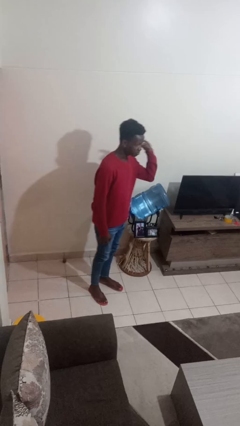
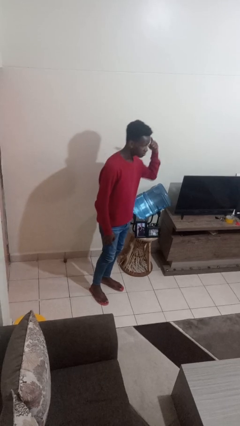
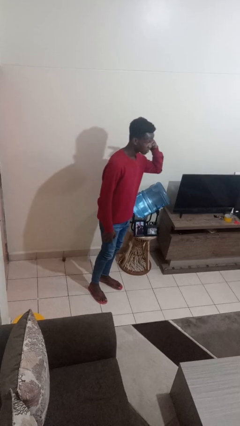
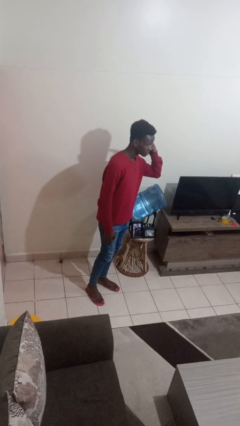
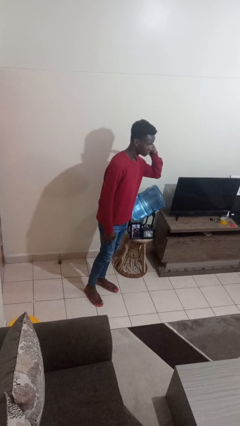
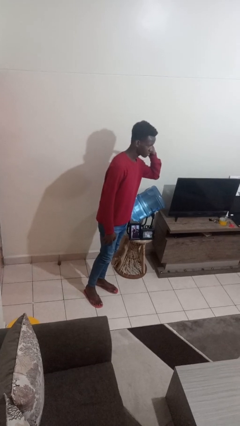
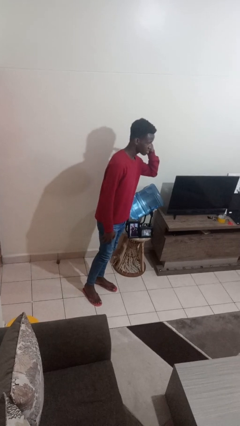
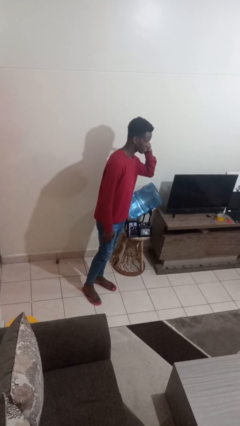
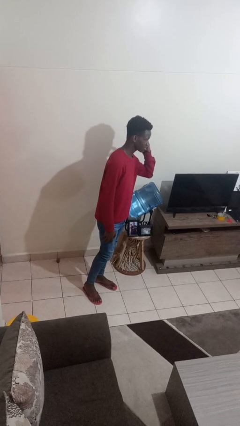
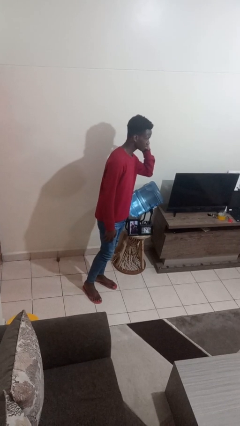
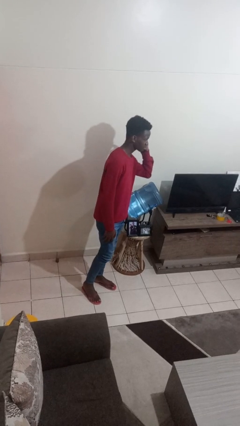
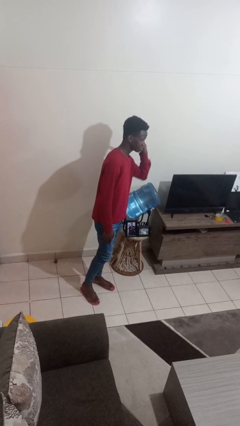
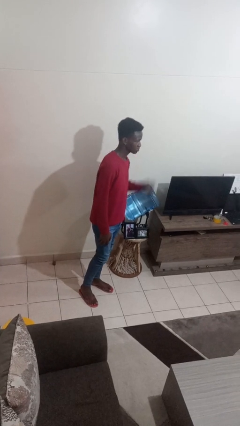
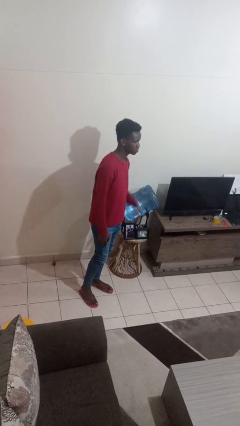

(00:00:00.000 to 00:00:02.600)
person gestures listen closely

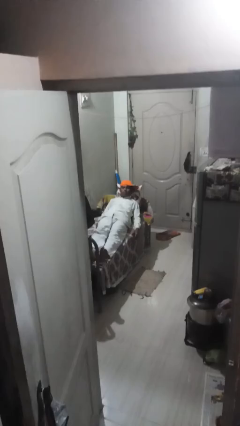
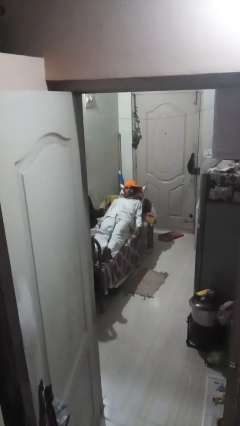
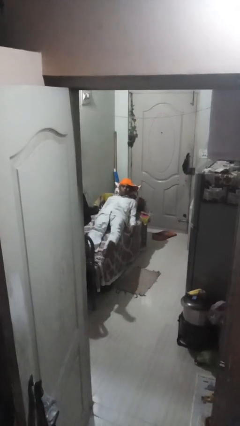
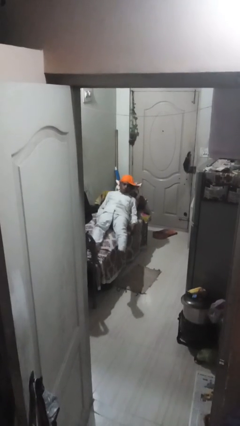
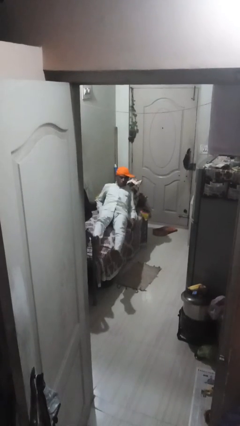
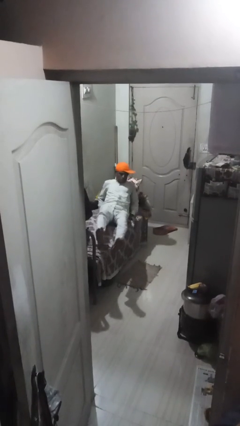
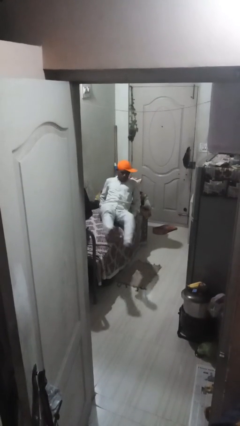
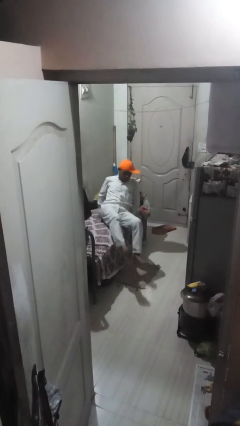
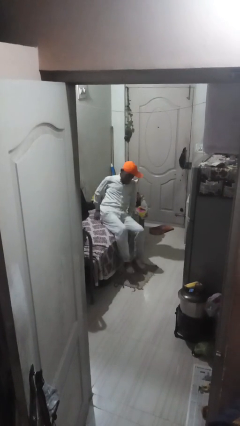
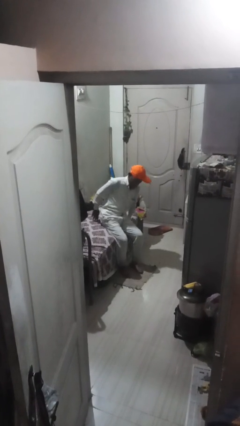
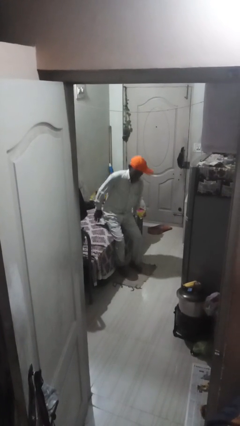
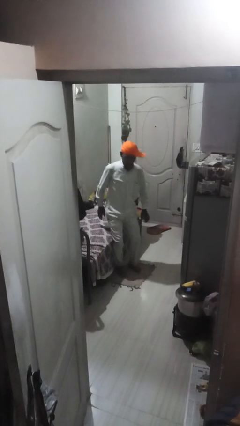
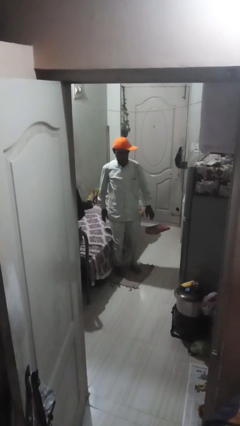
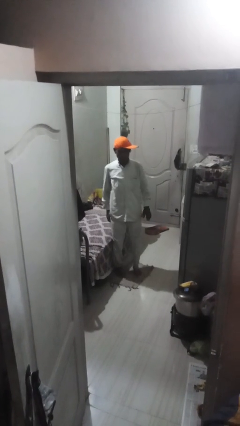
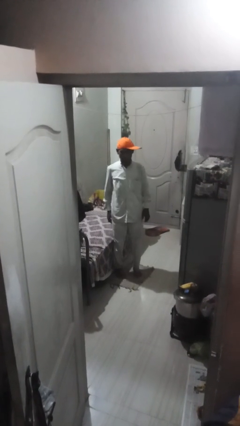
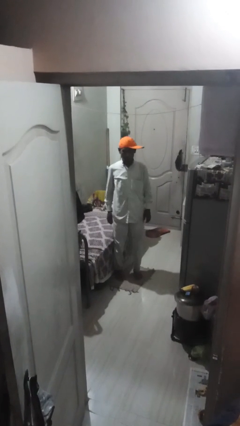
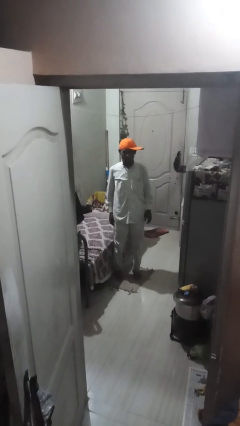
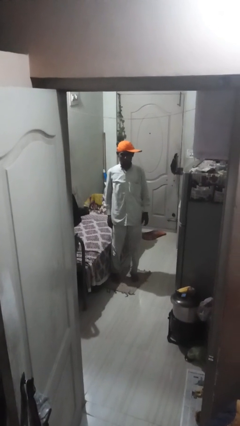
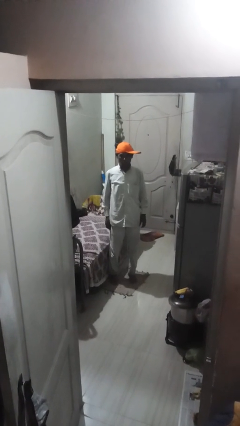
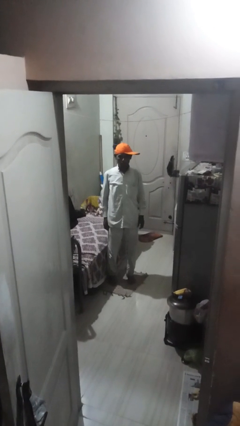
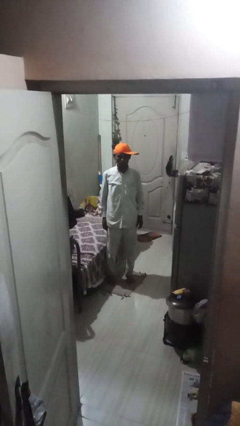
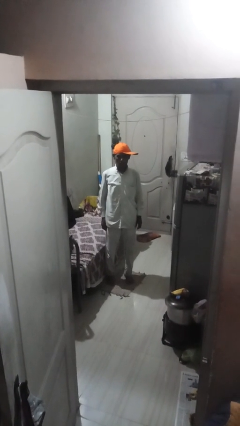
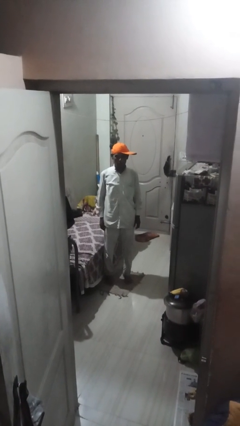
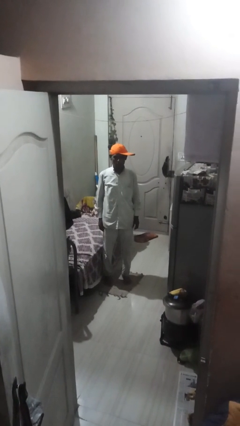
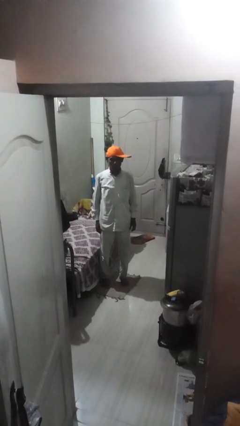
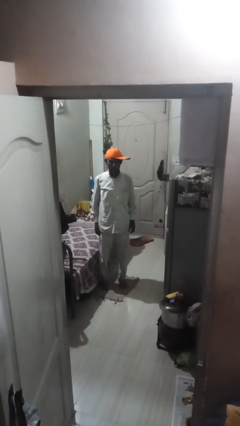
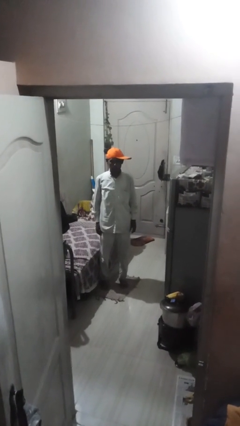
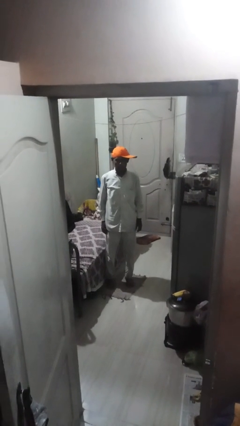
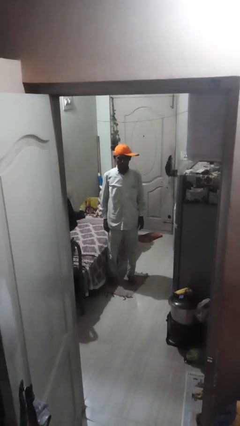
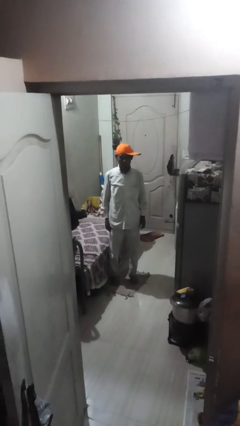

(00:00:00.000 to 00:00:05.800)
person stands up

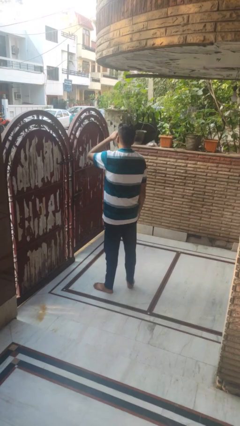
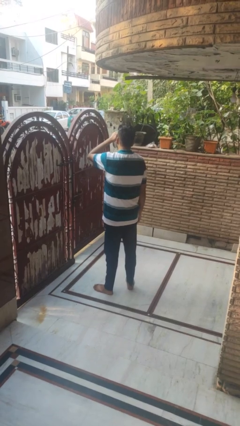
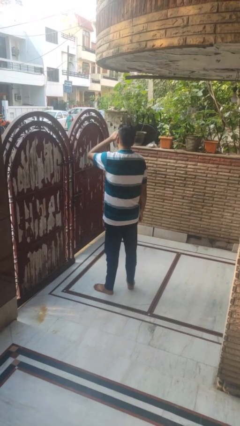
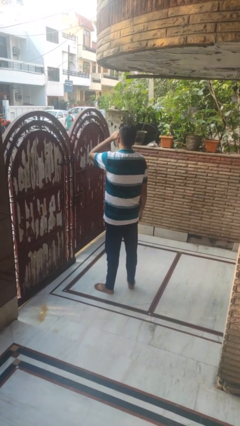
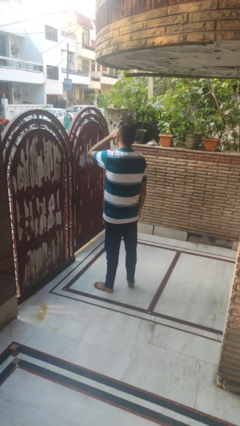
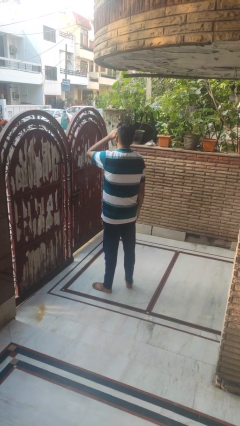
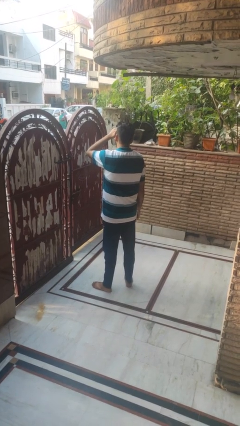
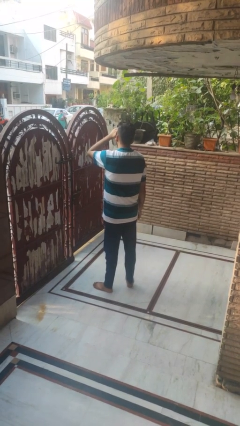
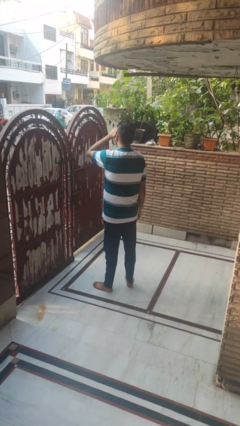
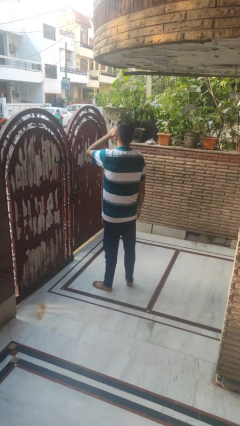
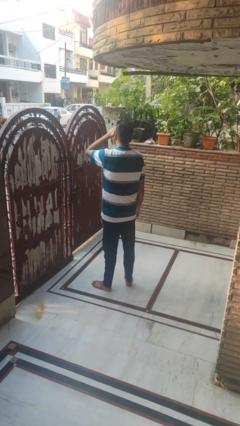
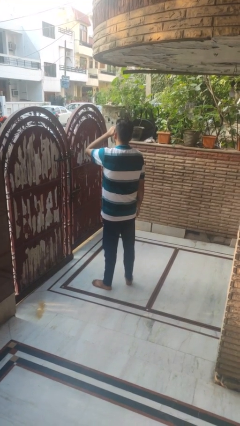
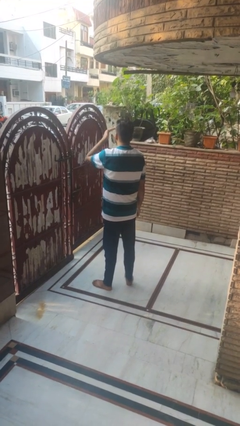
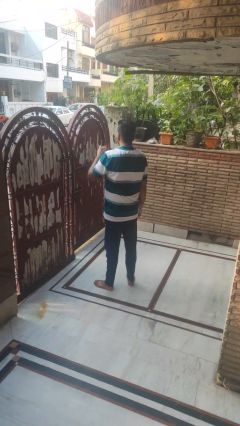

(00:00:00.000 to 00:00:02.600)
person shades eyes

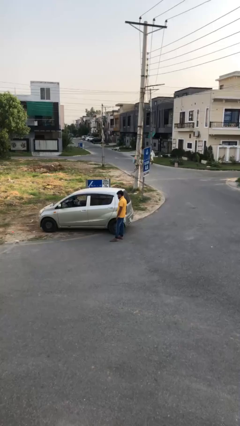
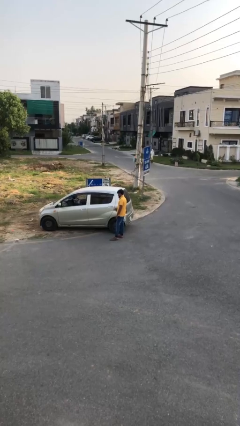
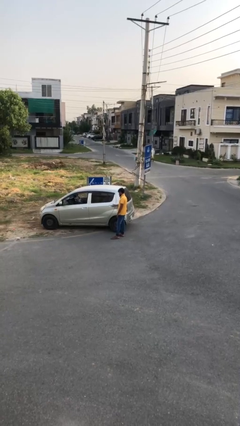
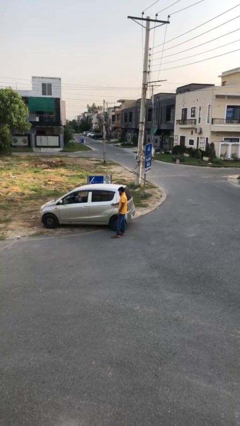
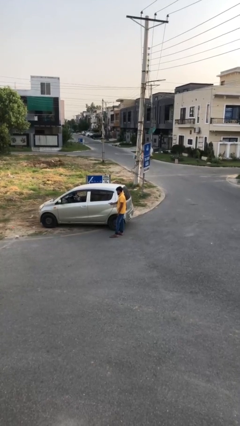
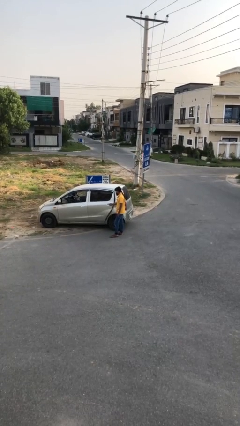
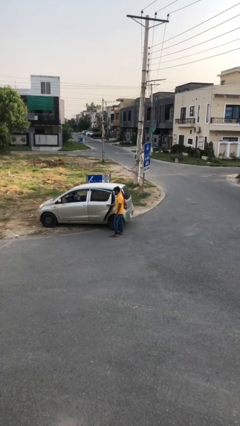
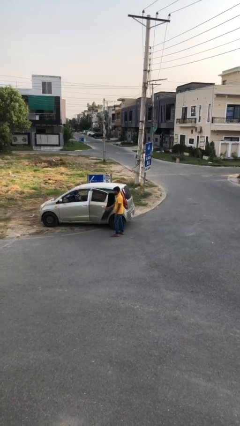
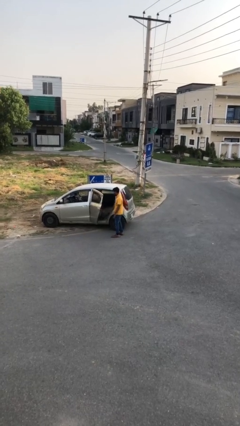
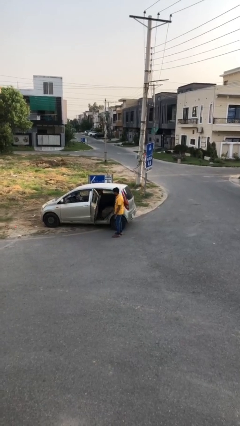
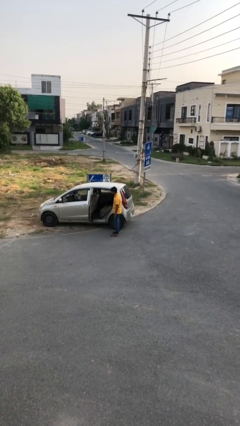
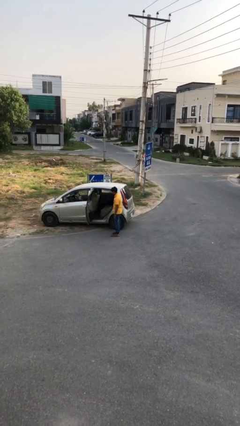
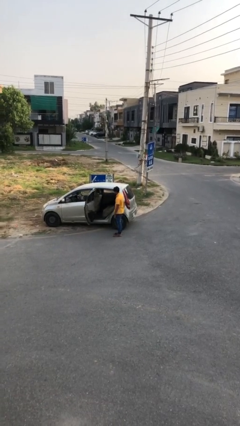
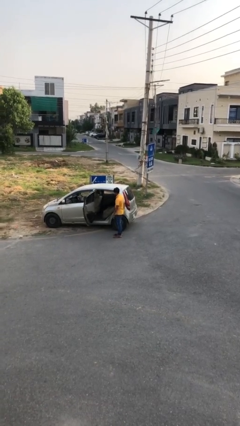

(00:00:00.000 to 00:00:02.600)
person opens car door

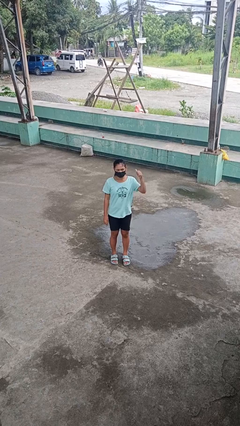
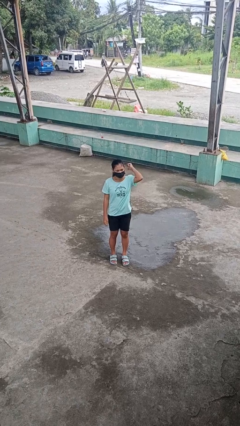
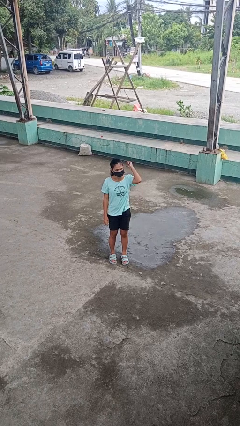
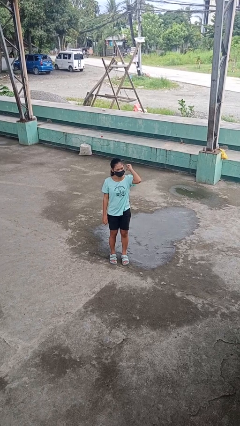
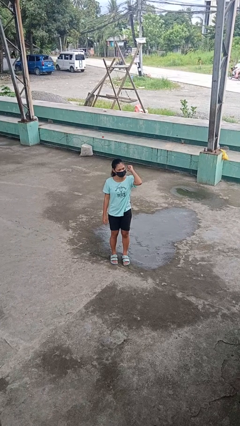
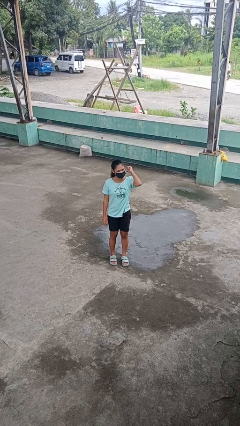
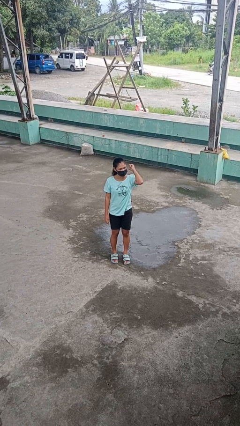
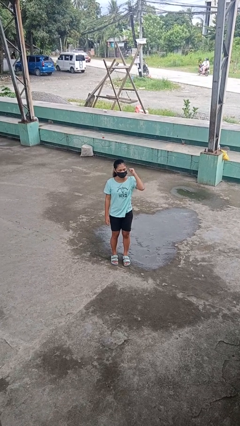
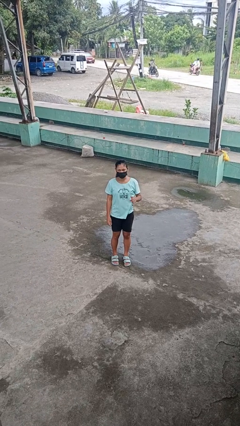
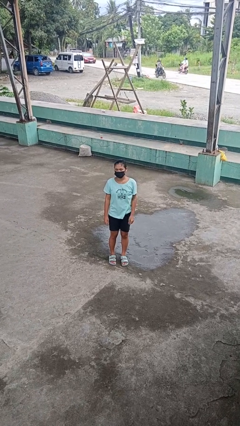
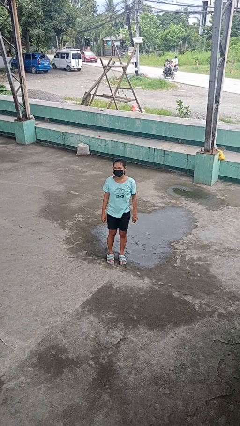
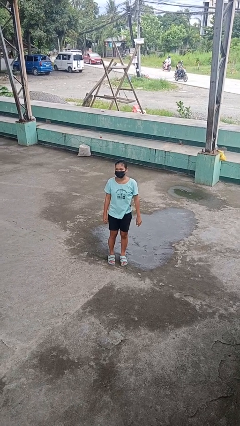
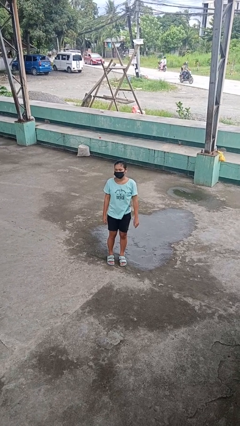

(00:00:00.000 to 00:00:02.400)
person gestures behind me

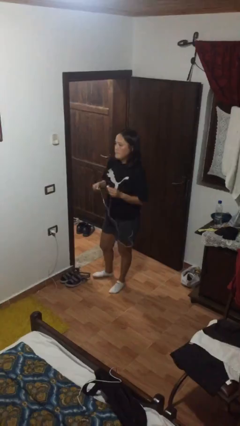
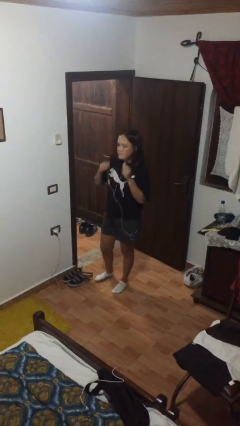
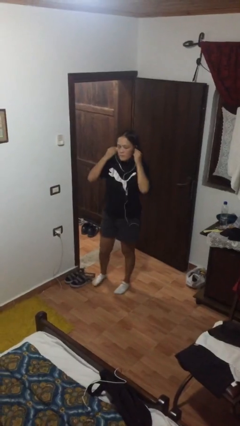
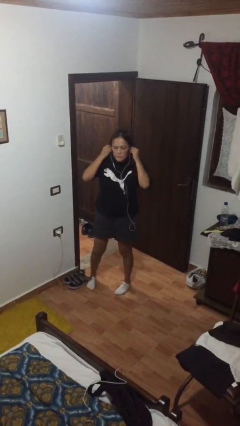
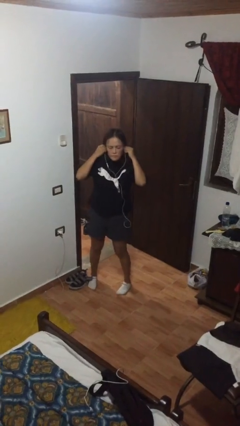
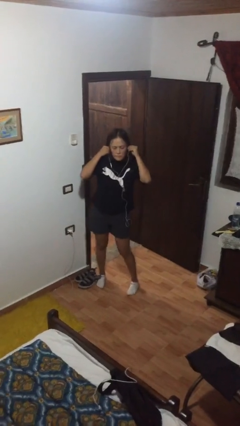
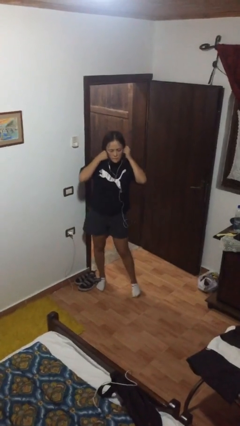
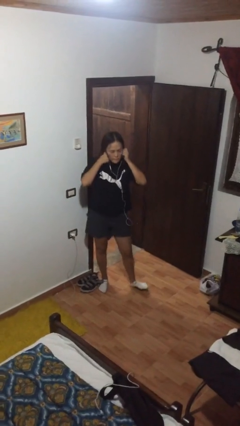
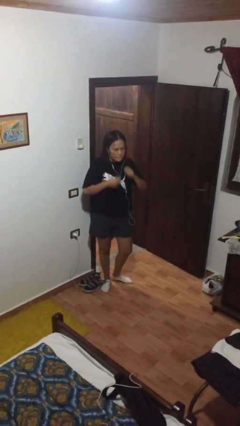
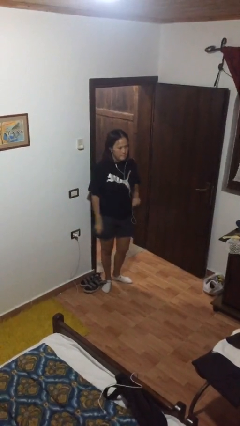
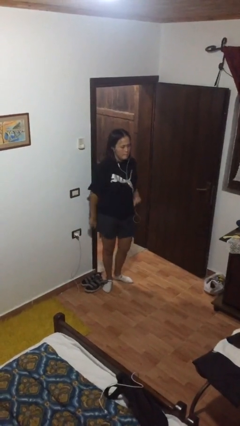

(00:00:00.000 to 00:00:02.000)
person puts on headphones
